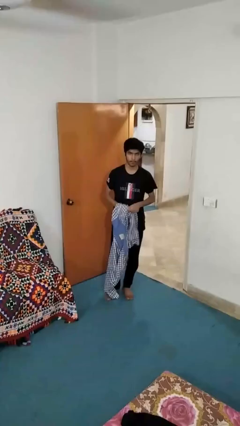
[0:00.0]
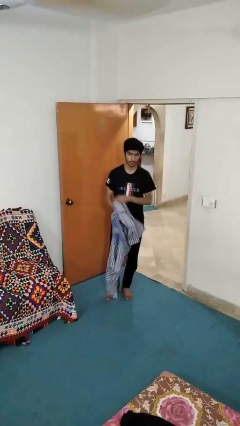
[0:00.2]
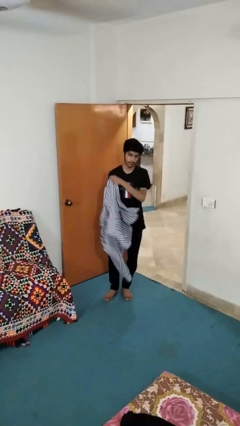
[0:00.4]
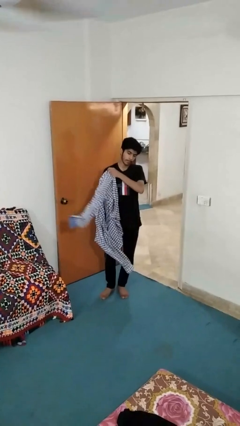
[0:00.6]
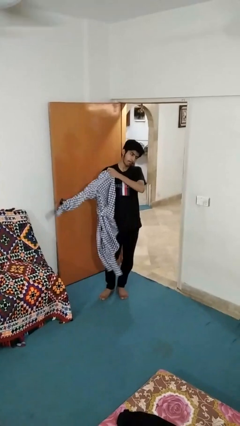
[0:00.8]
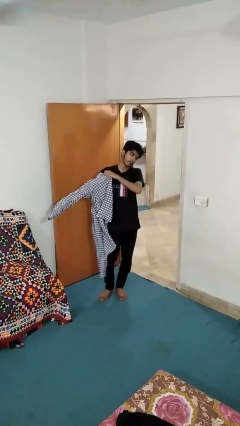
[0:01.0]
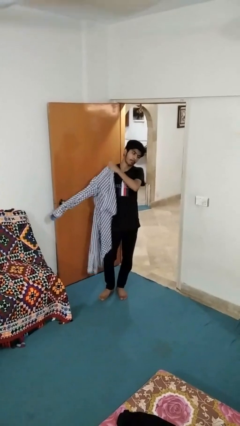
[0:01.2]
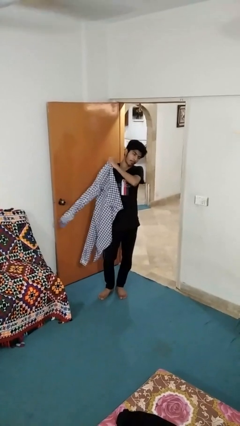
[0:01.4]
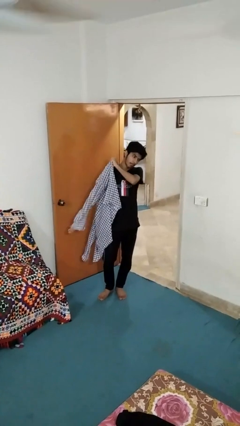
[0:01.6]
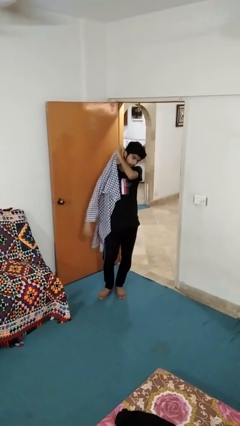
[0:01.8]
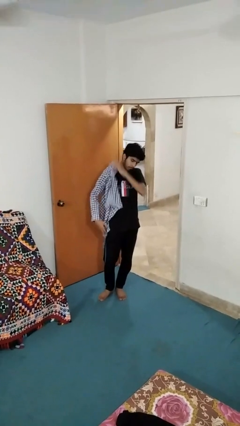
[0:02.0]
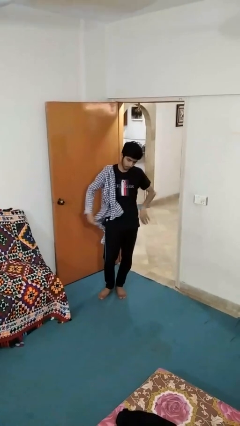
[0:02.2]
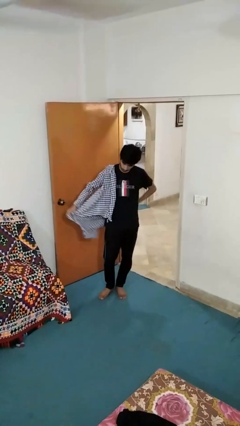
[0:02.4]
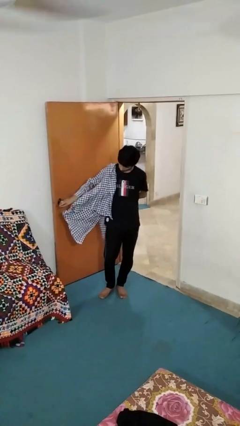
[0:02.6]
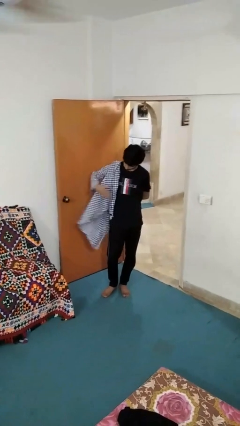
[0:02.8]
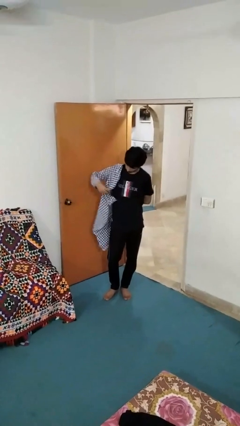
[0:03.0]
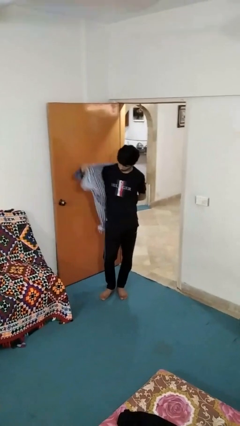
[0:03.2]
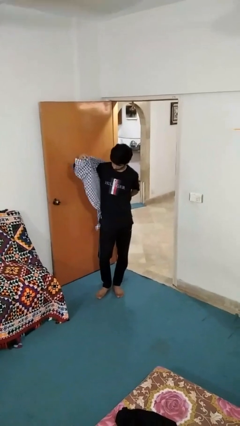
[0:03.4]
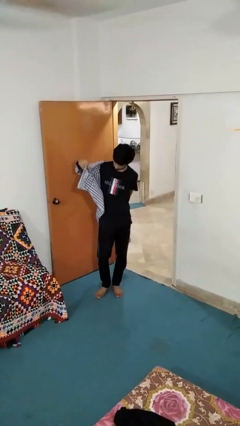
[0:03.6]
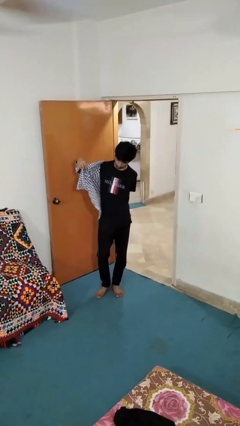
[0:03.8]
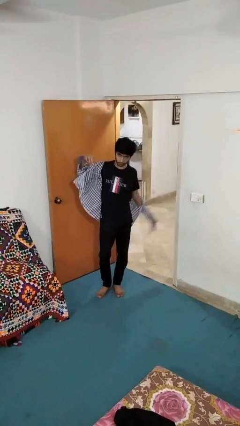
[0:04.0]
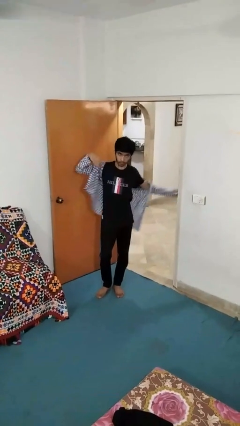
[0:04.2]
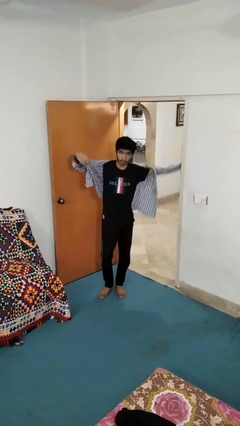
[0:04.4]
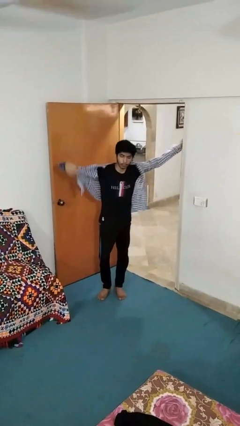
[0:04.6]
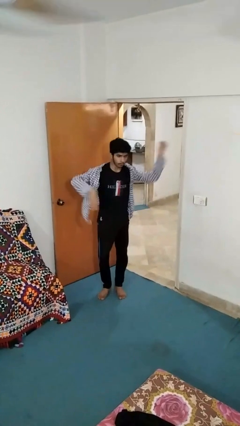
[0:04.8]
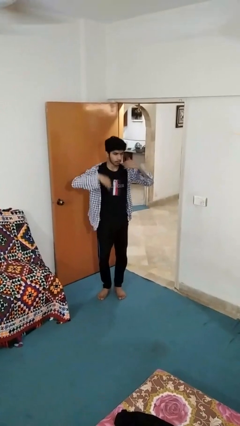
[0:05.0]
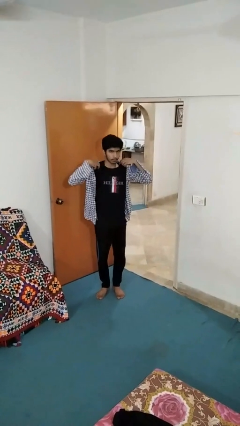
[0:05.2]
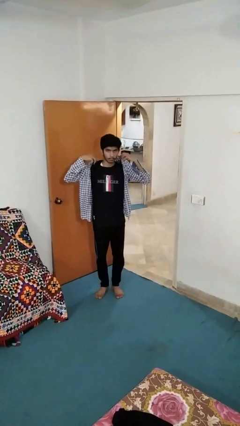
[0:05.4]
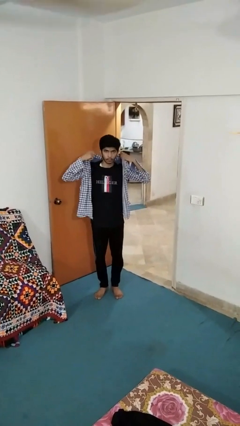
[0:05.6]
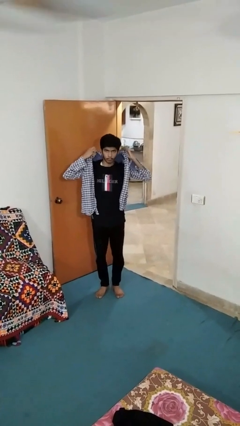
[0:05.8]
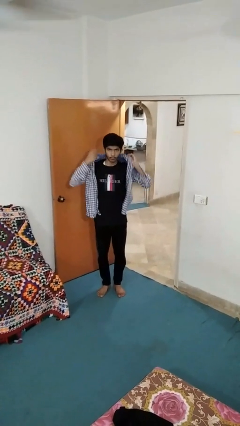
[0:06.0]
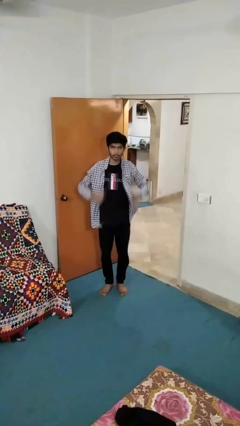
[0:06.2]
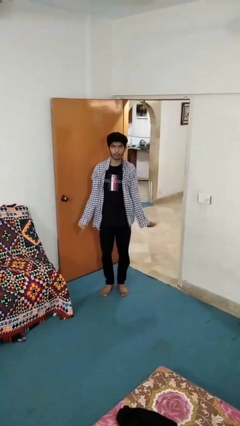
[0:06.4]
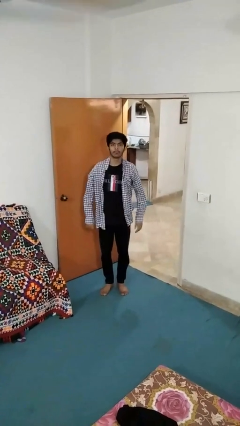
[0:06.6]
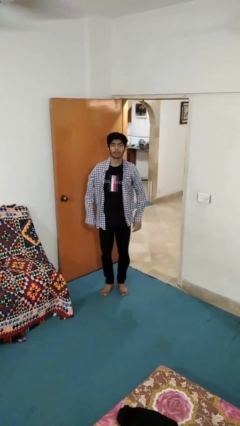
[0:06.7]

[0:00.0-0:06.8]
person puts on shirt

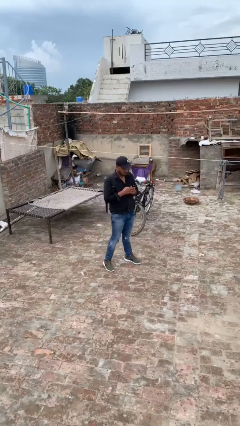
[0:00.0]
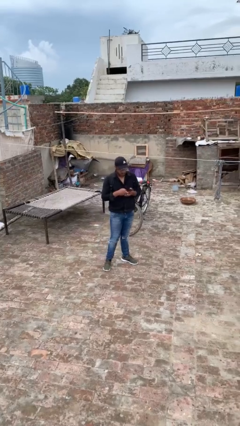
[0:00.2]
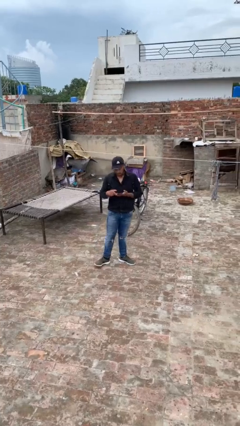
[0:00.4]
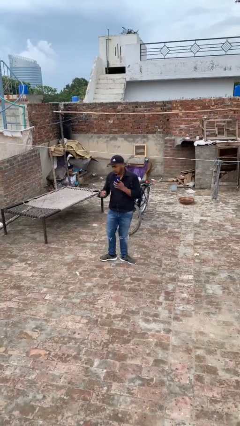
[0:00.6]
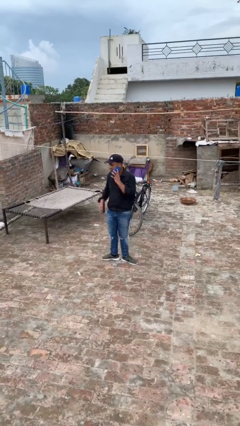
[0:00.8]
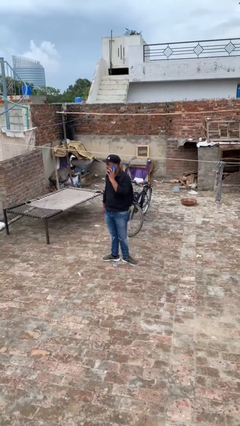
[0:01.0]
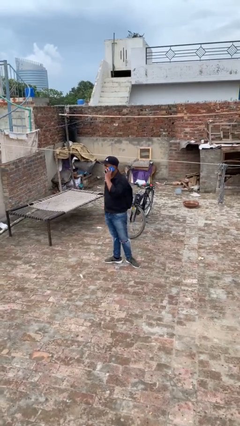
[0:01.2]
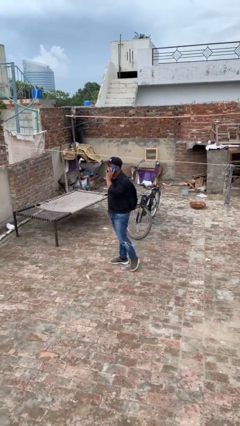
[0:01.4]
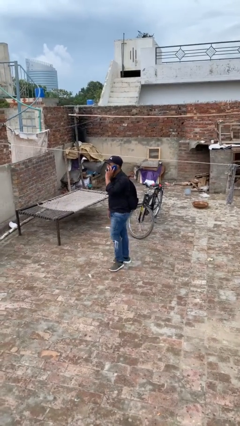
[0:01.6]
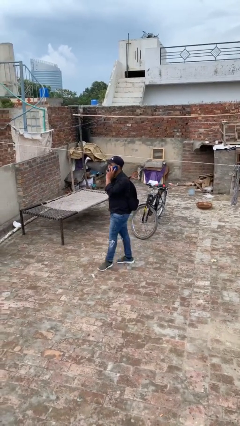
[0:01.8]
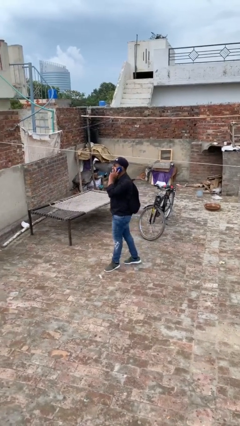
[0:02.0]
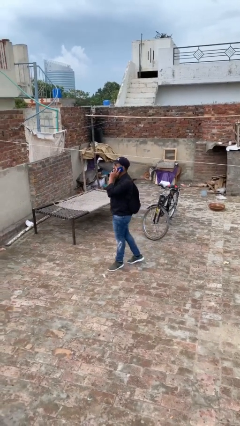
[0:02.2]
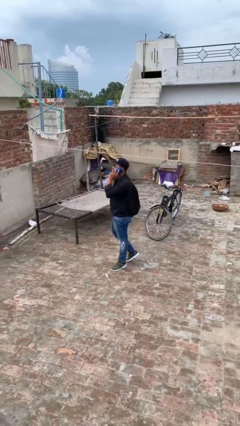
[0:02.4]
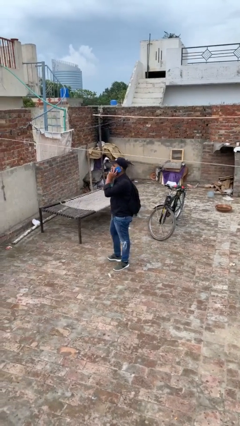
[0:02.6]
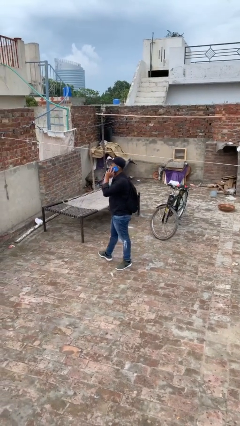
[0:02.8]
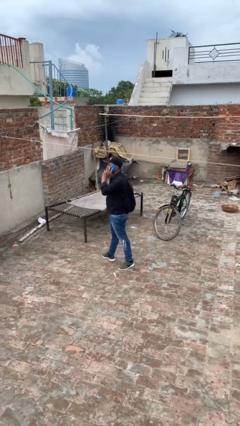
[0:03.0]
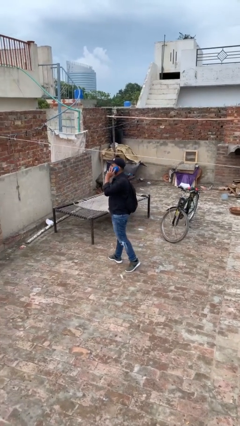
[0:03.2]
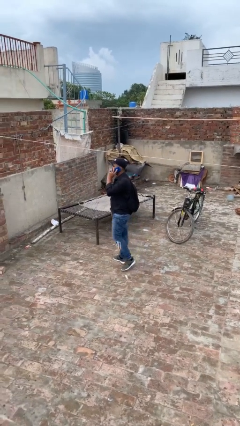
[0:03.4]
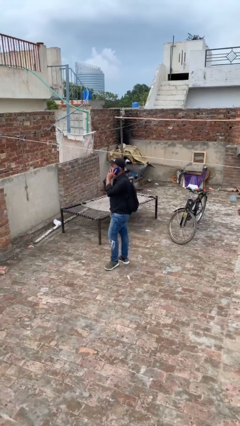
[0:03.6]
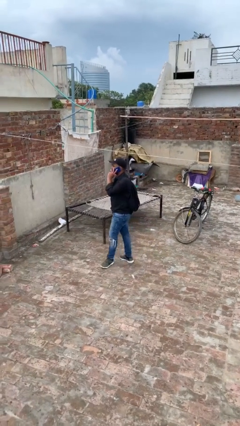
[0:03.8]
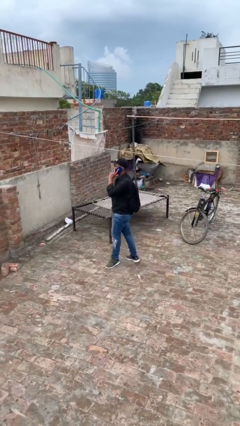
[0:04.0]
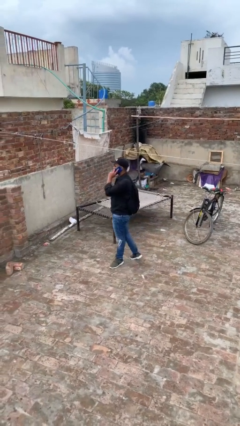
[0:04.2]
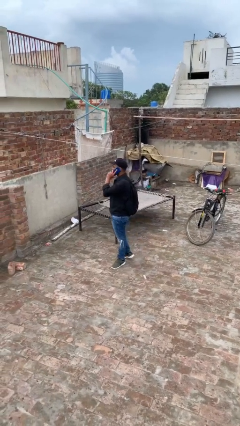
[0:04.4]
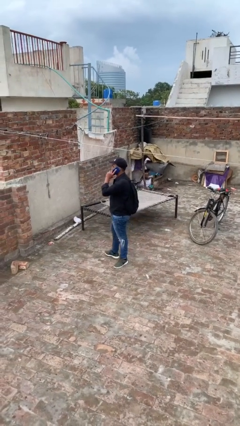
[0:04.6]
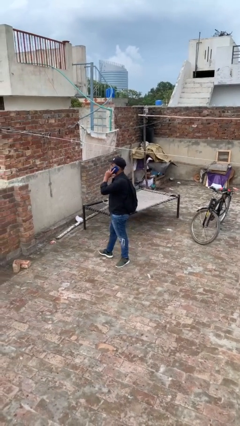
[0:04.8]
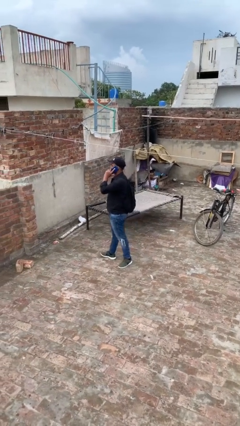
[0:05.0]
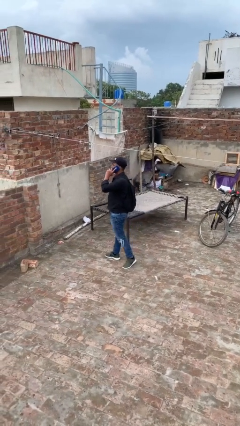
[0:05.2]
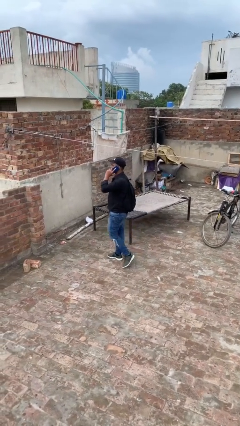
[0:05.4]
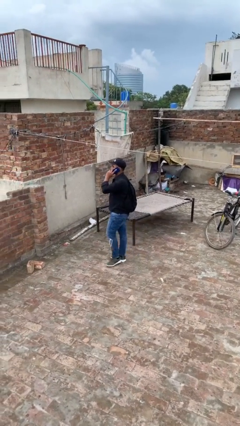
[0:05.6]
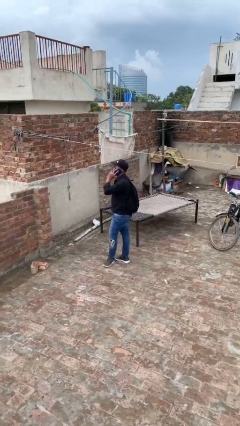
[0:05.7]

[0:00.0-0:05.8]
person talks on phone

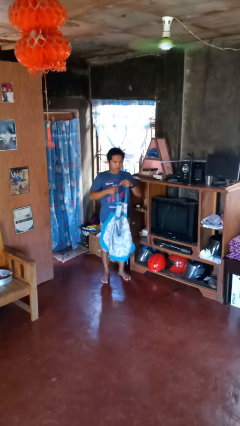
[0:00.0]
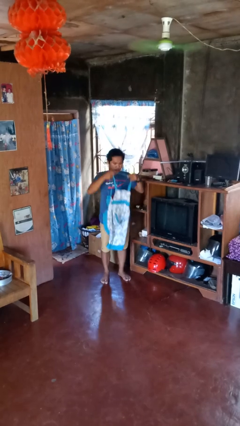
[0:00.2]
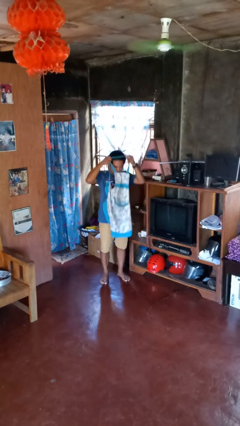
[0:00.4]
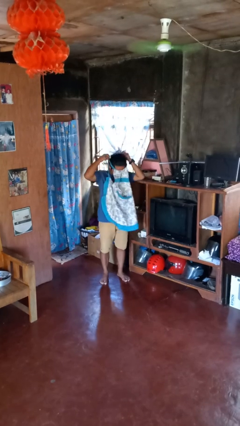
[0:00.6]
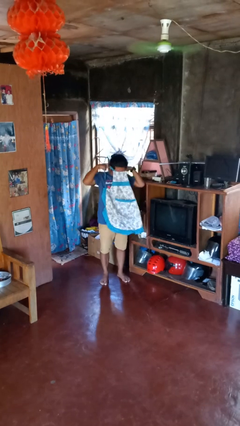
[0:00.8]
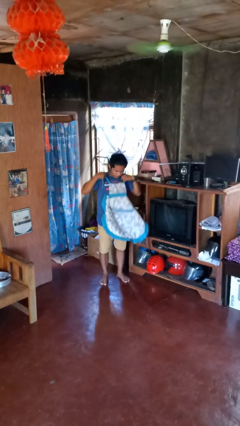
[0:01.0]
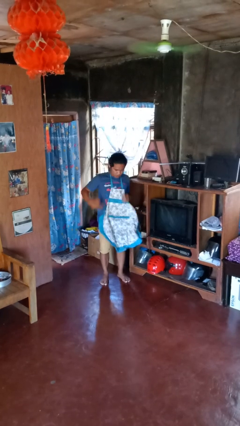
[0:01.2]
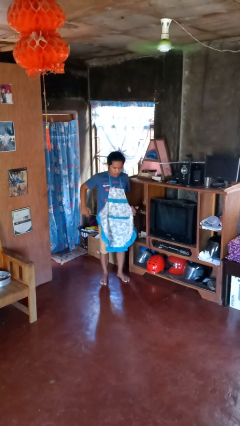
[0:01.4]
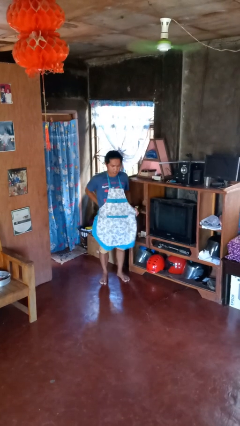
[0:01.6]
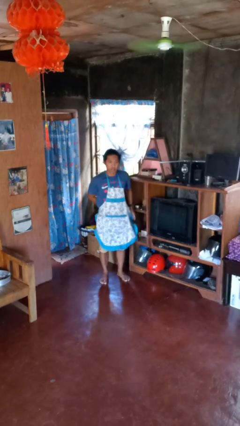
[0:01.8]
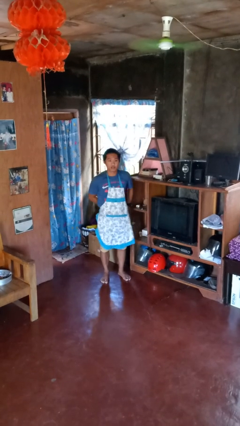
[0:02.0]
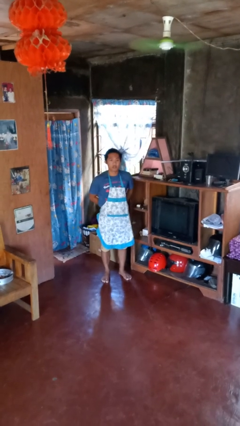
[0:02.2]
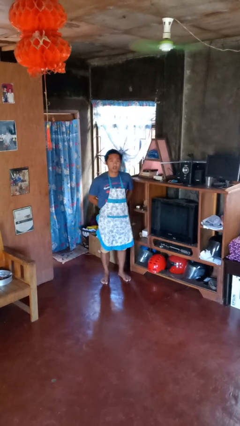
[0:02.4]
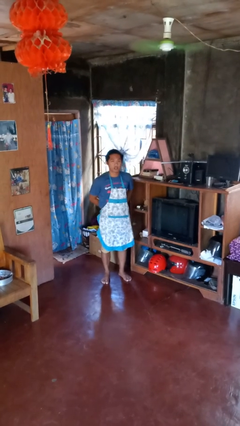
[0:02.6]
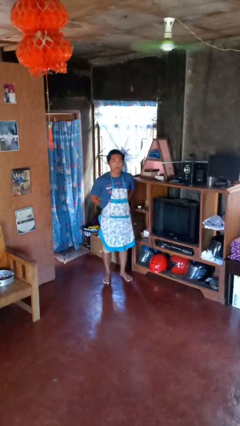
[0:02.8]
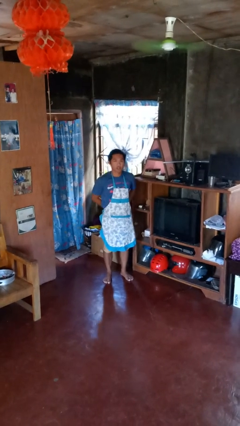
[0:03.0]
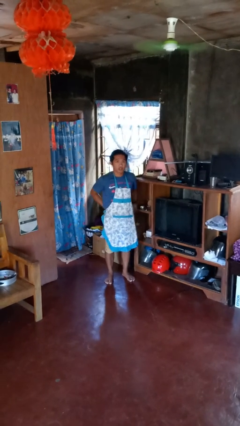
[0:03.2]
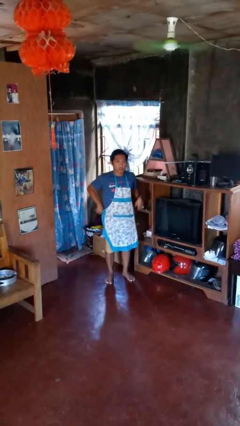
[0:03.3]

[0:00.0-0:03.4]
person puts on apron

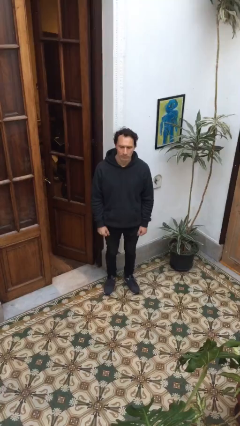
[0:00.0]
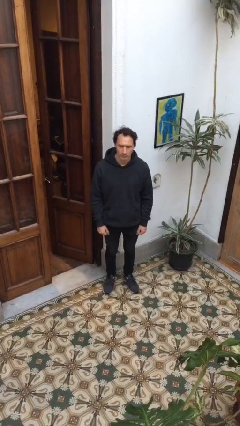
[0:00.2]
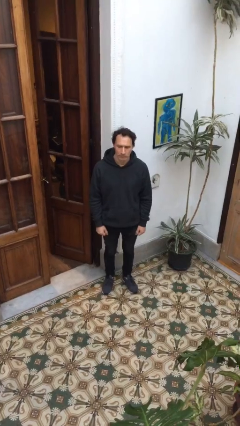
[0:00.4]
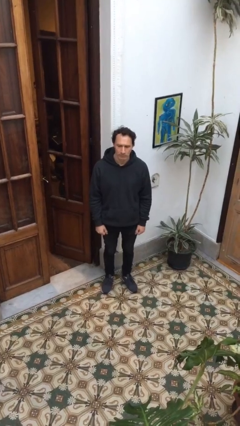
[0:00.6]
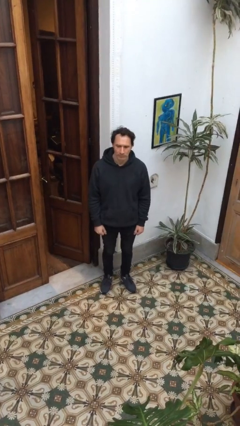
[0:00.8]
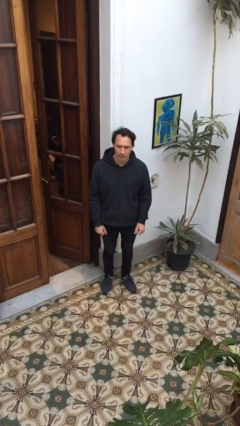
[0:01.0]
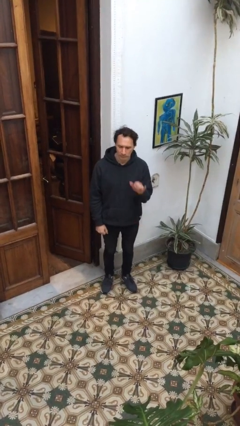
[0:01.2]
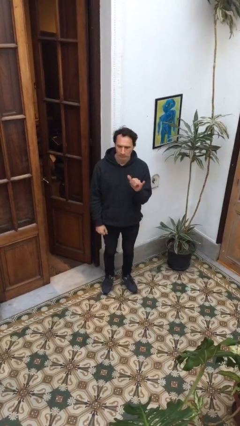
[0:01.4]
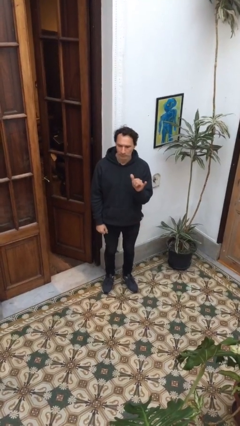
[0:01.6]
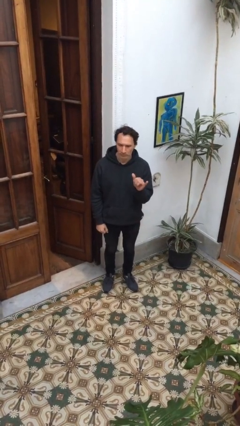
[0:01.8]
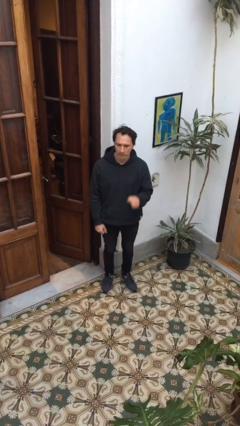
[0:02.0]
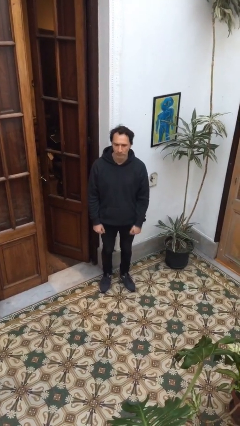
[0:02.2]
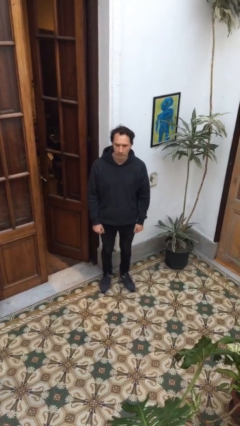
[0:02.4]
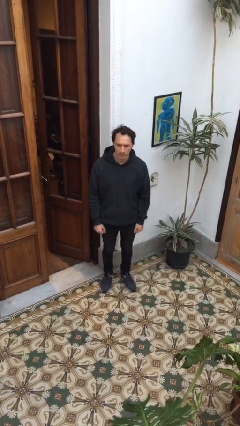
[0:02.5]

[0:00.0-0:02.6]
person gestures hang loose
